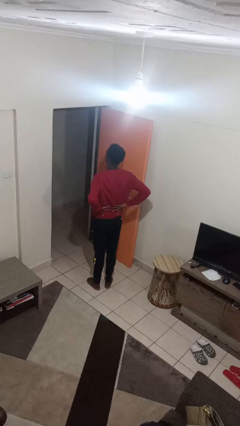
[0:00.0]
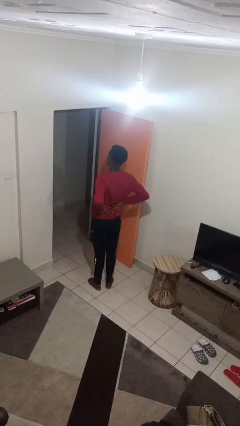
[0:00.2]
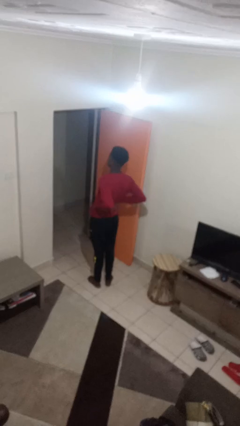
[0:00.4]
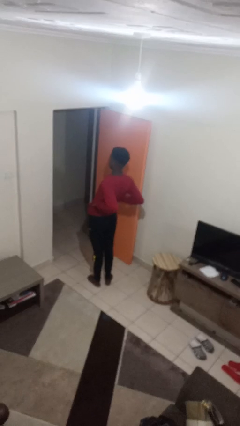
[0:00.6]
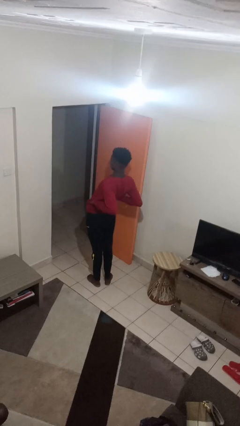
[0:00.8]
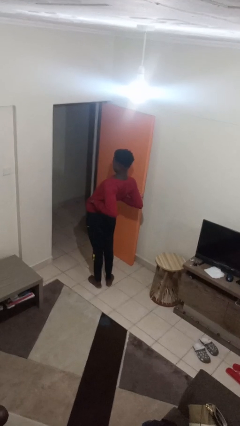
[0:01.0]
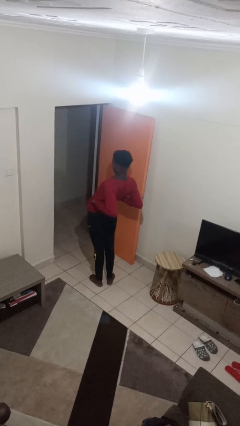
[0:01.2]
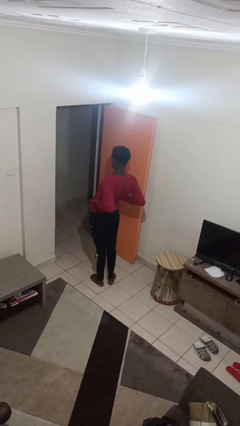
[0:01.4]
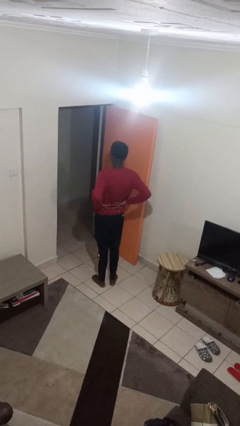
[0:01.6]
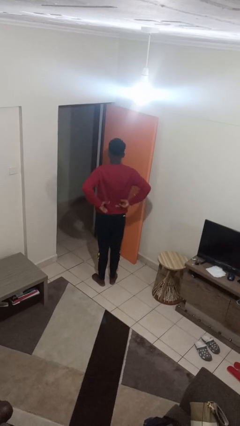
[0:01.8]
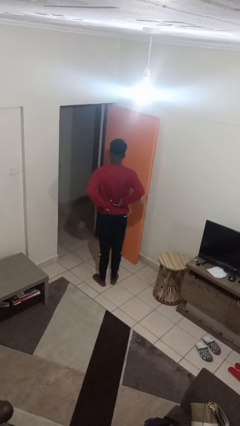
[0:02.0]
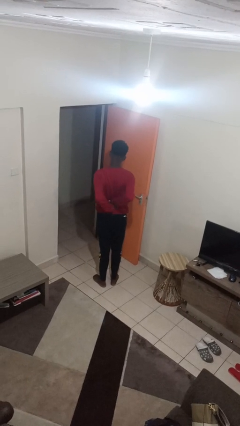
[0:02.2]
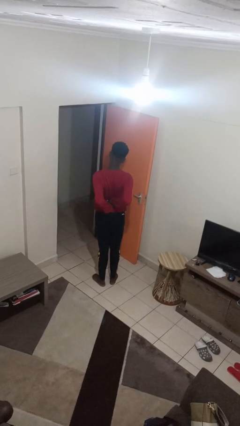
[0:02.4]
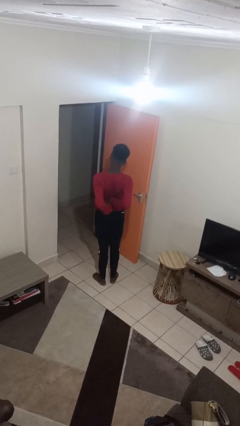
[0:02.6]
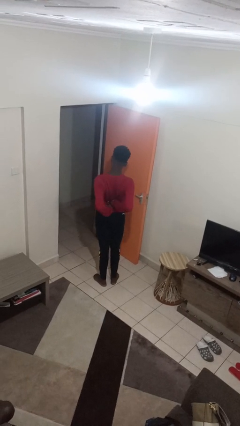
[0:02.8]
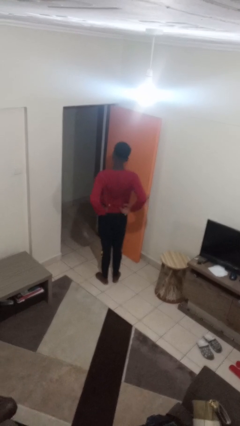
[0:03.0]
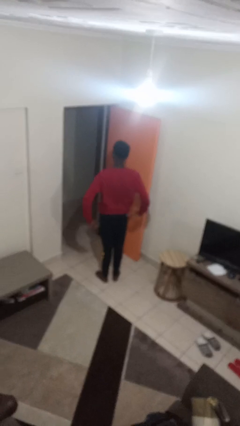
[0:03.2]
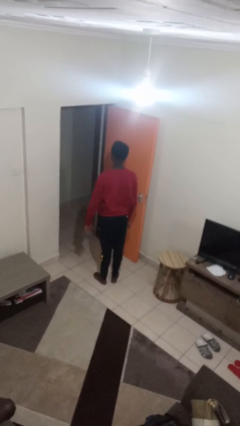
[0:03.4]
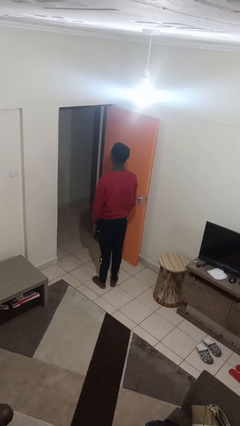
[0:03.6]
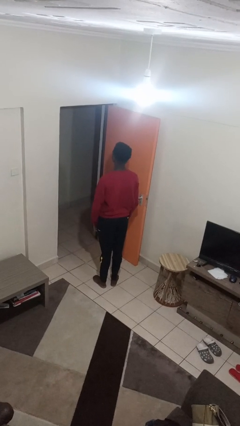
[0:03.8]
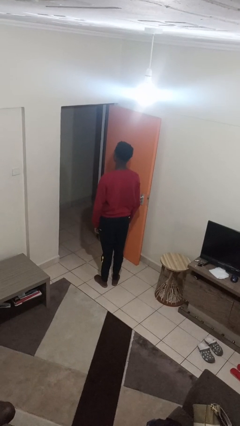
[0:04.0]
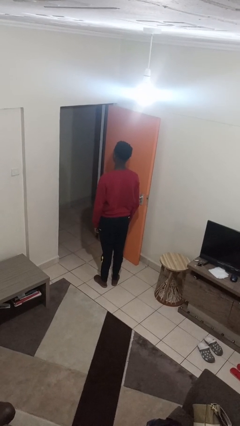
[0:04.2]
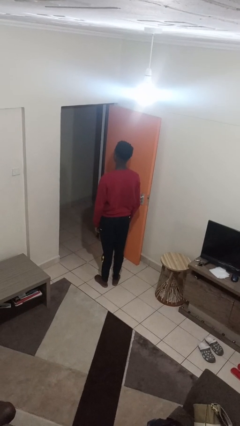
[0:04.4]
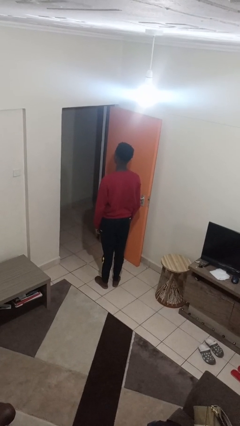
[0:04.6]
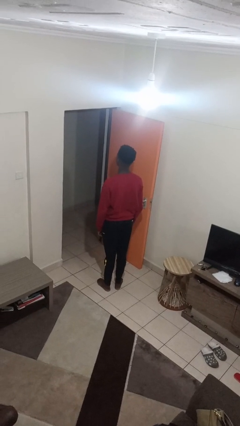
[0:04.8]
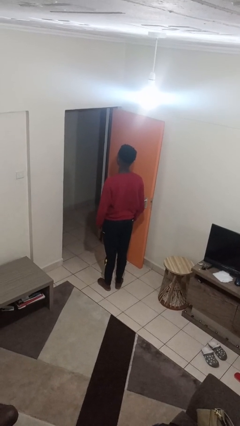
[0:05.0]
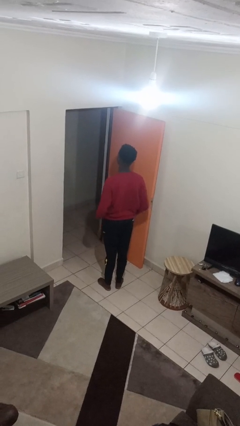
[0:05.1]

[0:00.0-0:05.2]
person stretches back

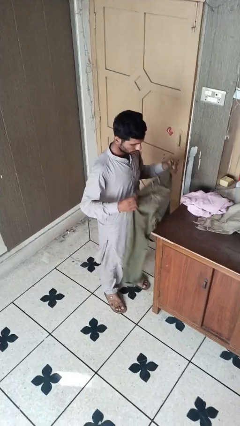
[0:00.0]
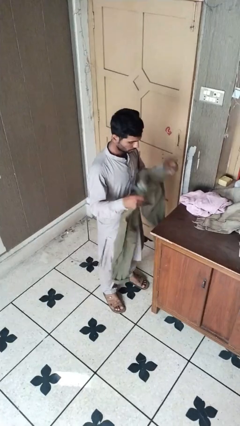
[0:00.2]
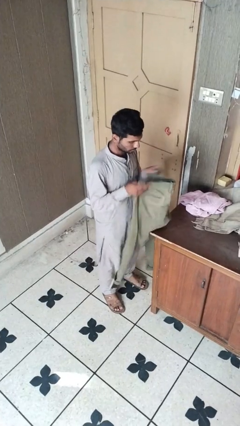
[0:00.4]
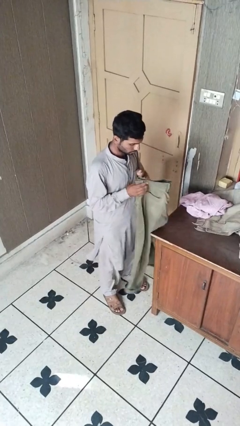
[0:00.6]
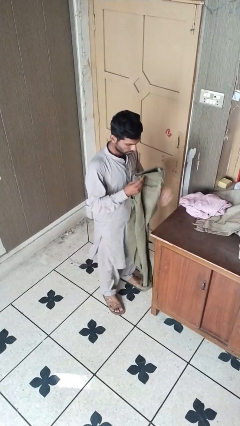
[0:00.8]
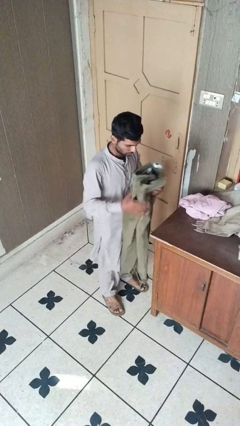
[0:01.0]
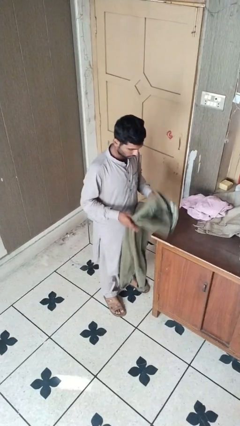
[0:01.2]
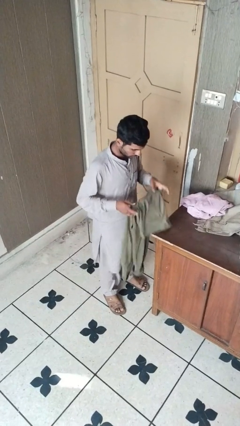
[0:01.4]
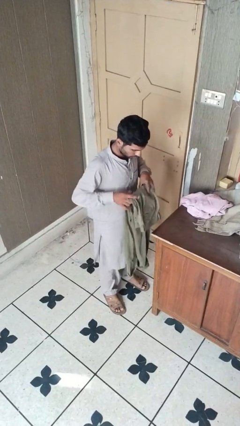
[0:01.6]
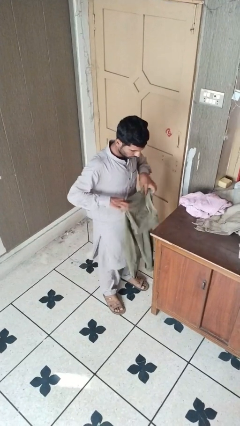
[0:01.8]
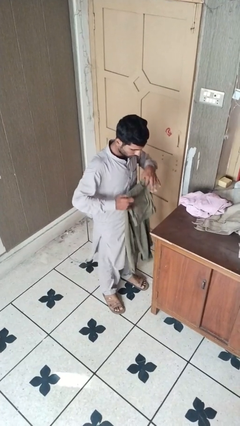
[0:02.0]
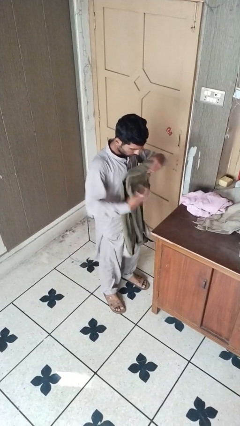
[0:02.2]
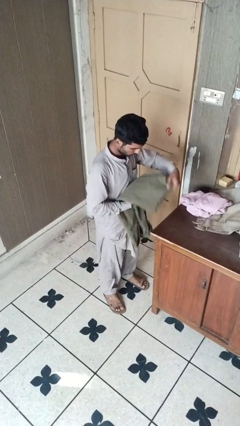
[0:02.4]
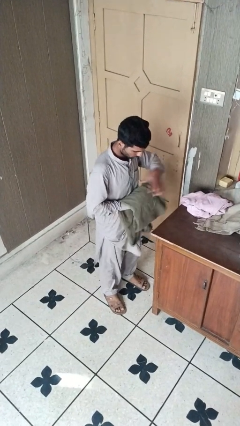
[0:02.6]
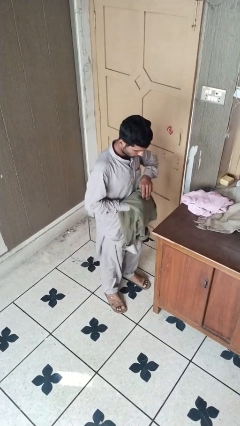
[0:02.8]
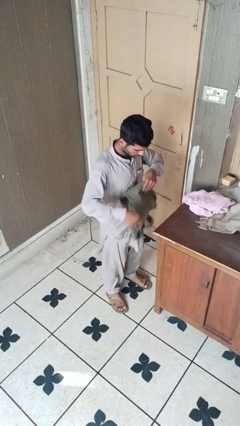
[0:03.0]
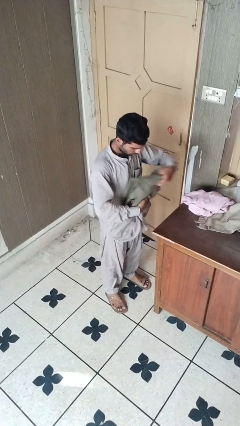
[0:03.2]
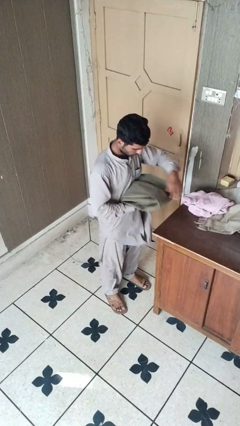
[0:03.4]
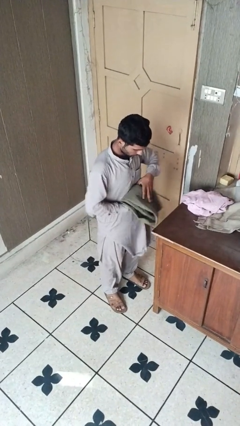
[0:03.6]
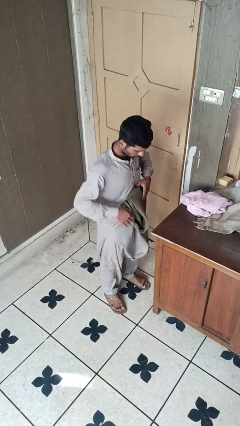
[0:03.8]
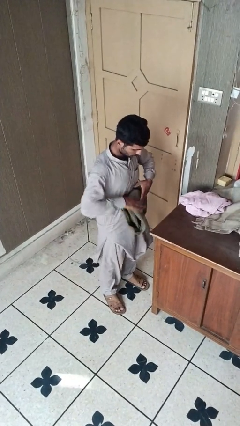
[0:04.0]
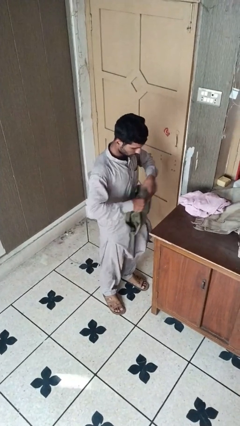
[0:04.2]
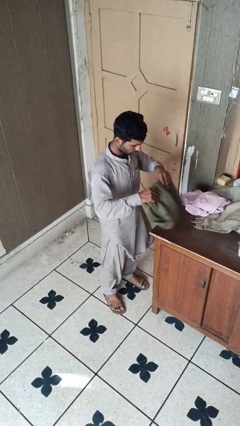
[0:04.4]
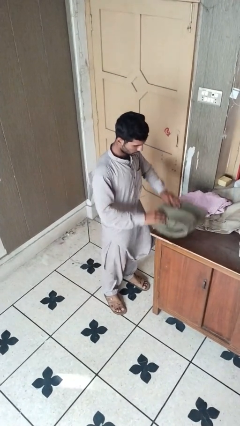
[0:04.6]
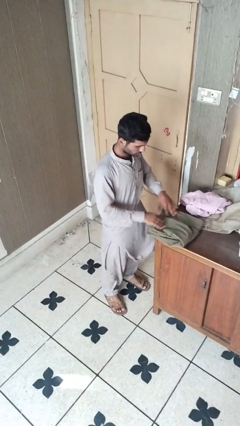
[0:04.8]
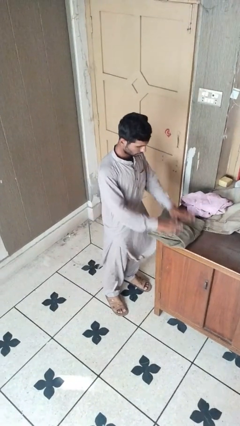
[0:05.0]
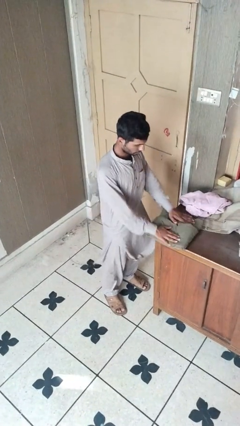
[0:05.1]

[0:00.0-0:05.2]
person folds pants

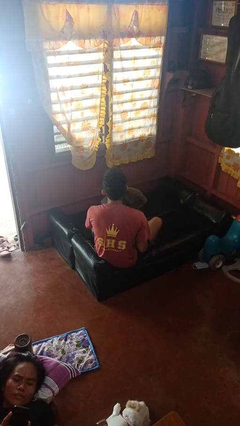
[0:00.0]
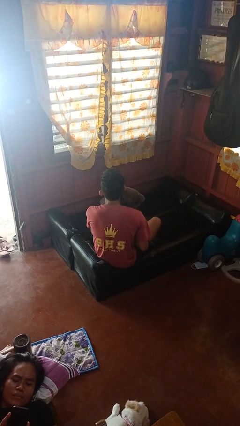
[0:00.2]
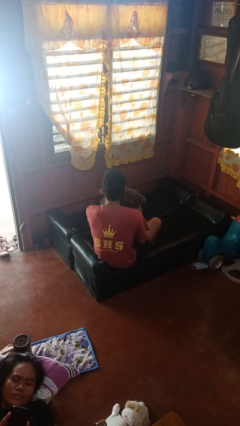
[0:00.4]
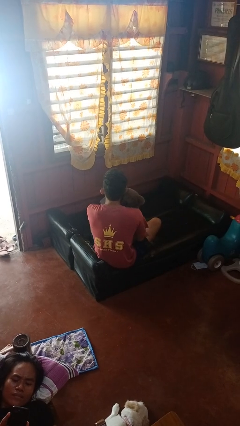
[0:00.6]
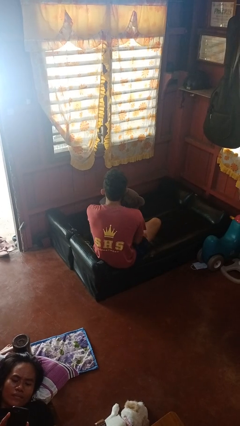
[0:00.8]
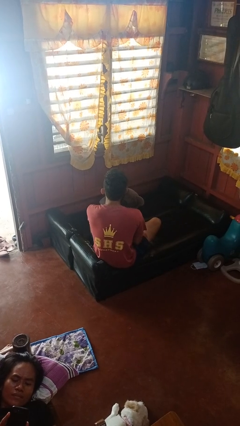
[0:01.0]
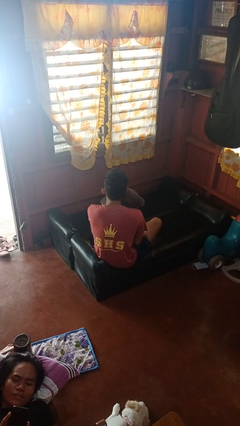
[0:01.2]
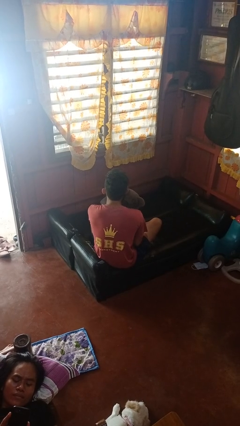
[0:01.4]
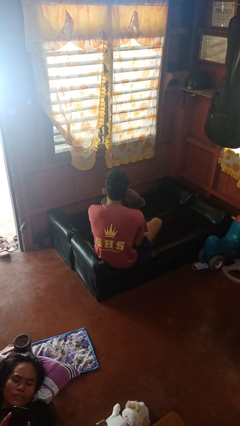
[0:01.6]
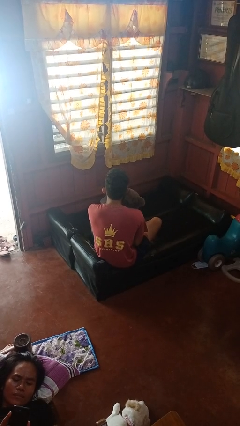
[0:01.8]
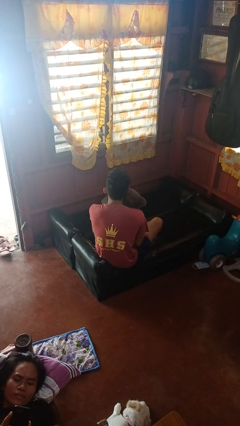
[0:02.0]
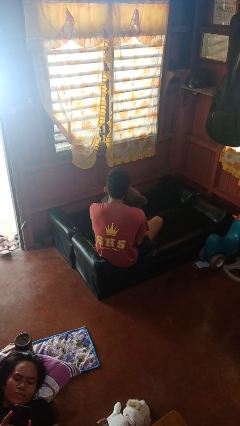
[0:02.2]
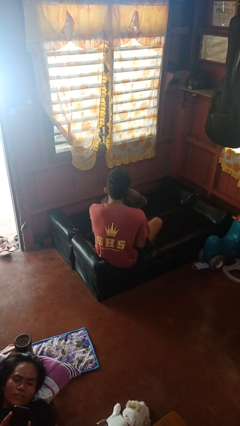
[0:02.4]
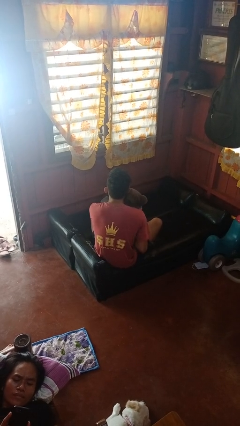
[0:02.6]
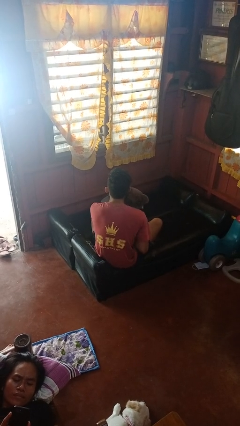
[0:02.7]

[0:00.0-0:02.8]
person hugs stuffed animal

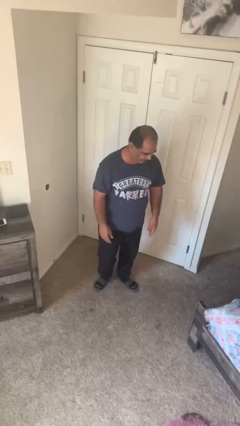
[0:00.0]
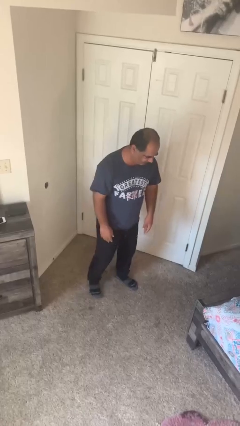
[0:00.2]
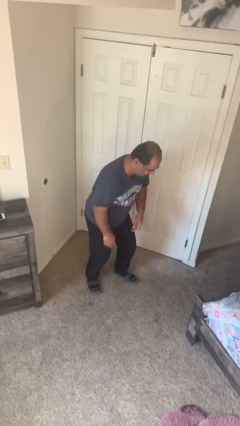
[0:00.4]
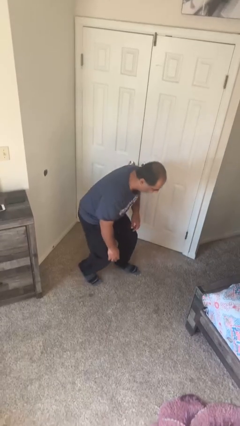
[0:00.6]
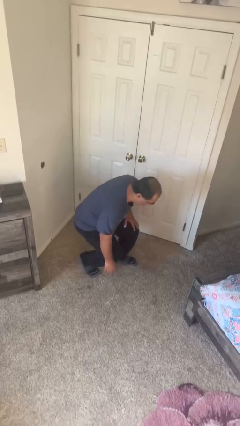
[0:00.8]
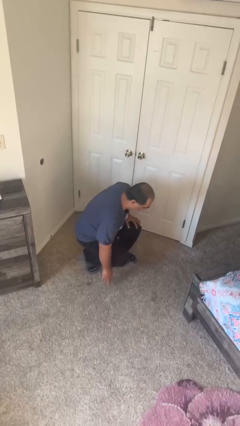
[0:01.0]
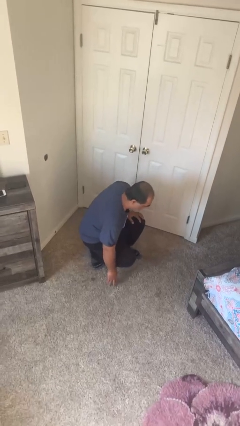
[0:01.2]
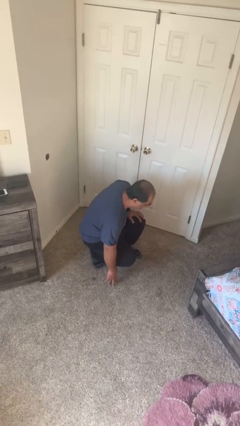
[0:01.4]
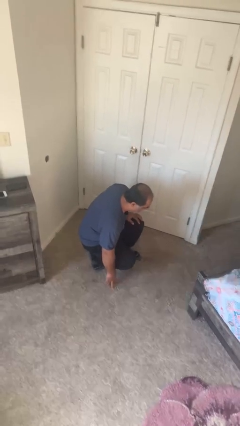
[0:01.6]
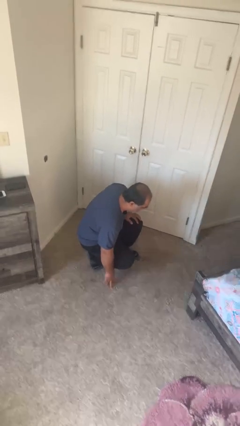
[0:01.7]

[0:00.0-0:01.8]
person sits down

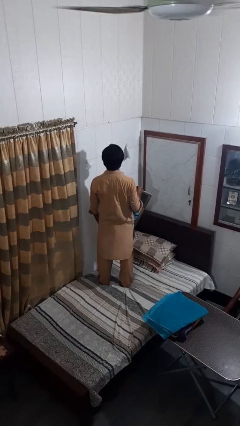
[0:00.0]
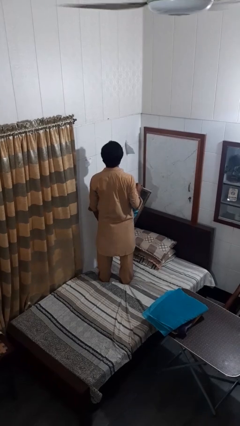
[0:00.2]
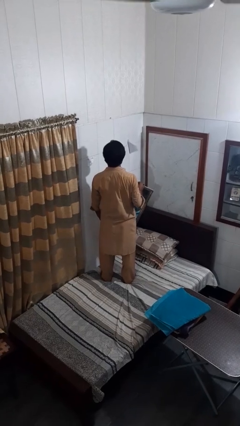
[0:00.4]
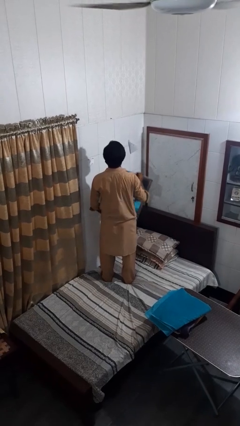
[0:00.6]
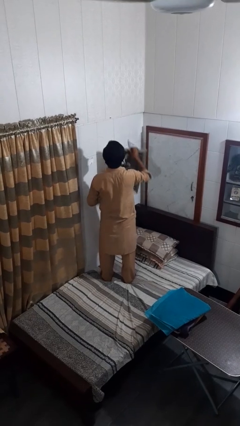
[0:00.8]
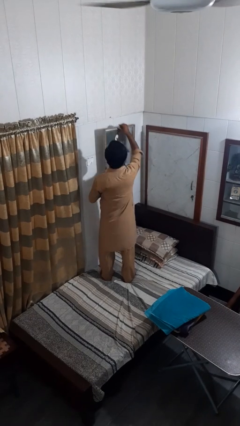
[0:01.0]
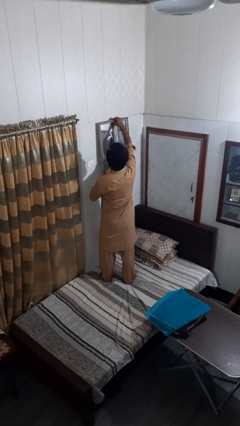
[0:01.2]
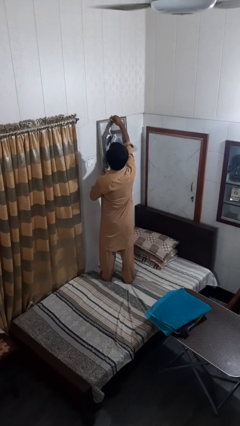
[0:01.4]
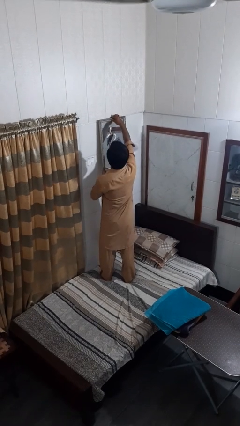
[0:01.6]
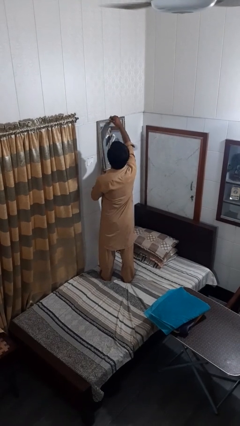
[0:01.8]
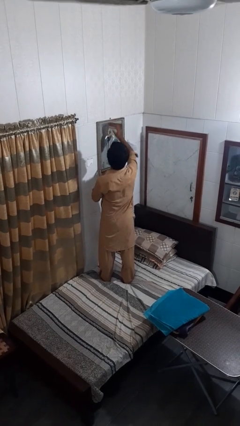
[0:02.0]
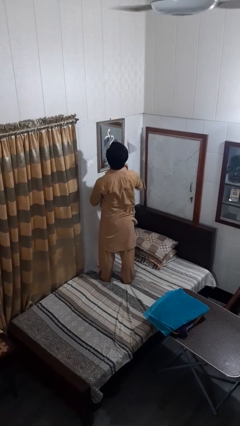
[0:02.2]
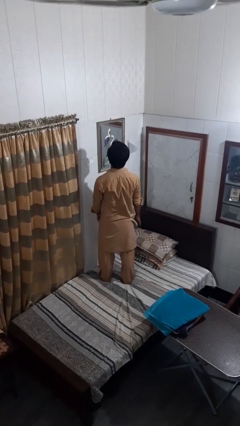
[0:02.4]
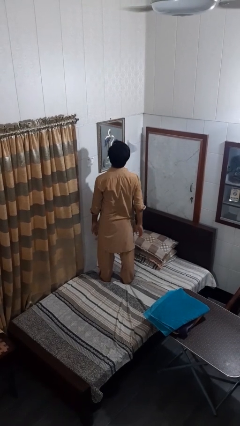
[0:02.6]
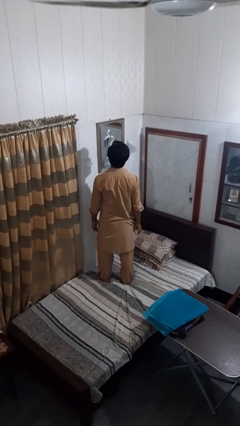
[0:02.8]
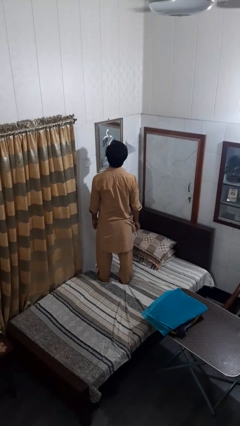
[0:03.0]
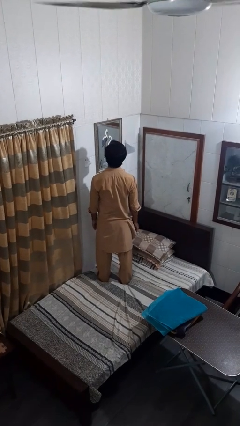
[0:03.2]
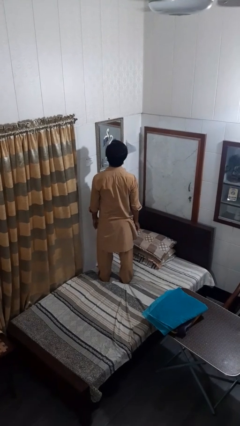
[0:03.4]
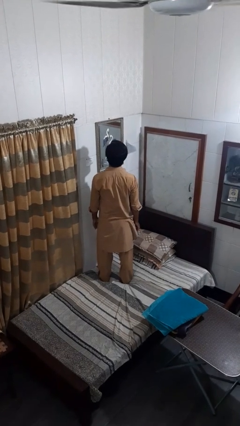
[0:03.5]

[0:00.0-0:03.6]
person puts up picture frame
